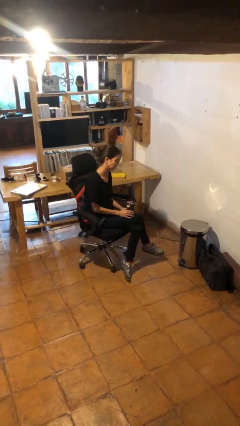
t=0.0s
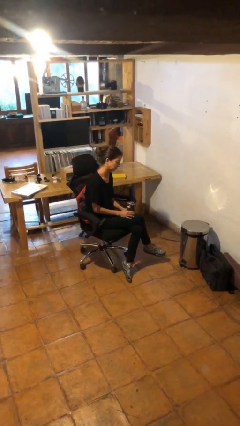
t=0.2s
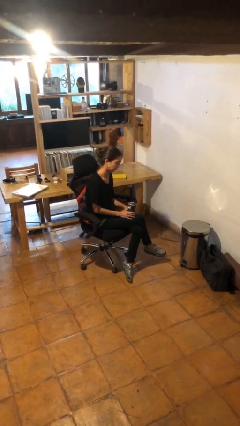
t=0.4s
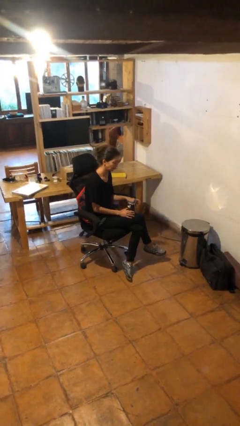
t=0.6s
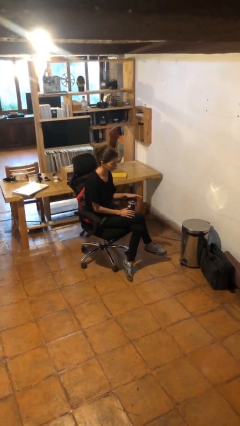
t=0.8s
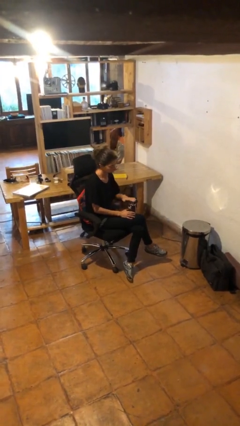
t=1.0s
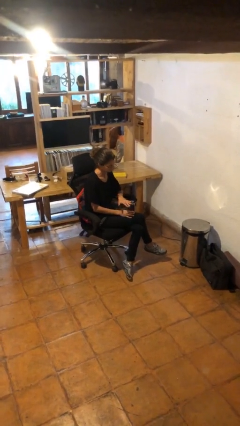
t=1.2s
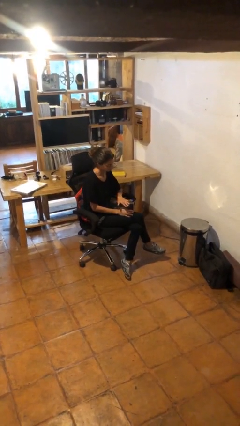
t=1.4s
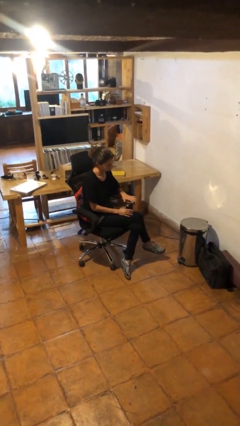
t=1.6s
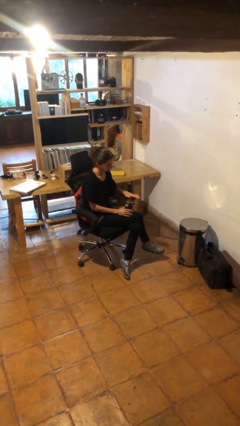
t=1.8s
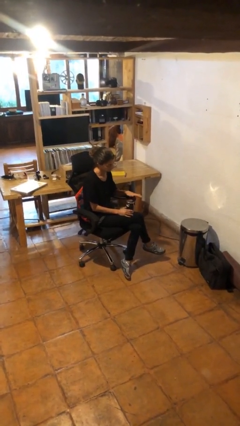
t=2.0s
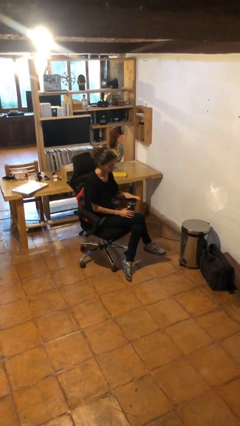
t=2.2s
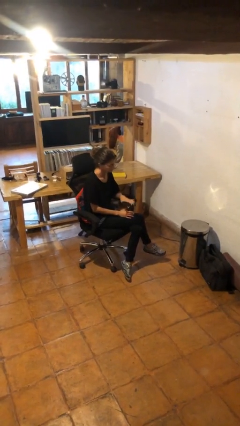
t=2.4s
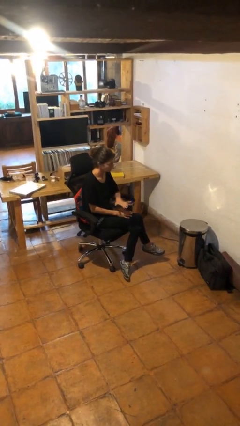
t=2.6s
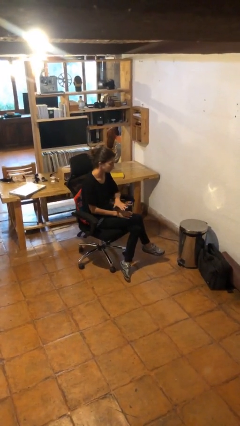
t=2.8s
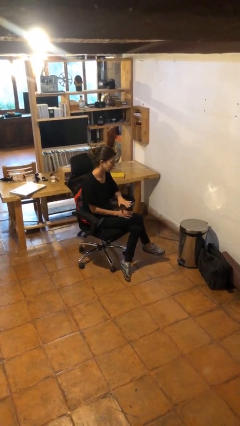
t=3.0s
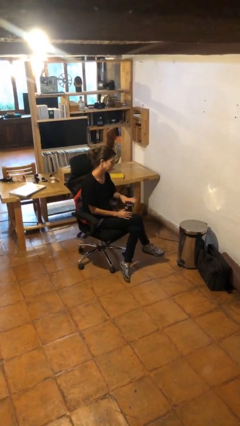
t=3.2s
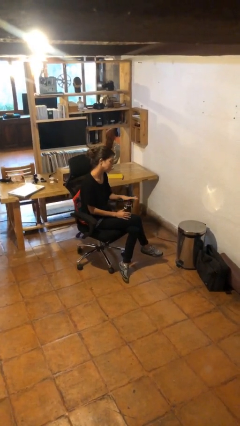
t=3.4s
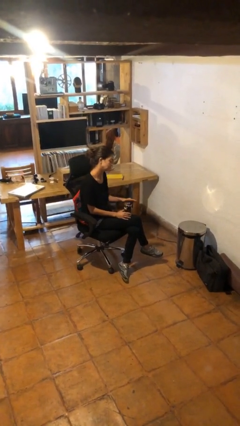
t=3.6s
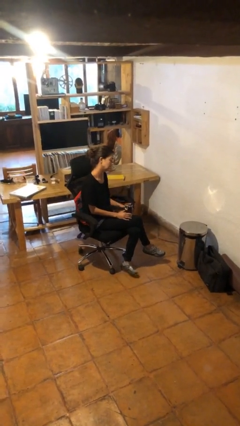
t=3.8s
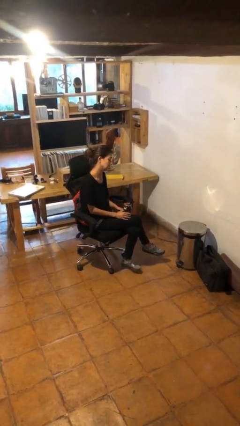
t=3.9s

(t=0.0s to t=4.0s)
person waves hand over object

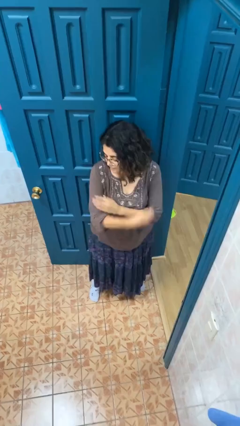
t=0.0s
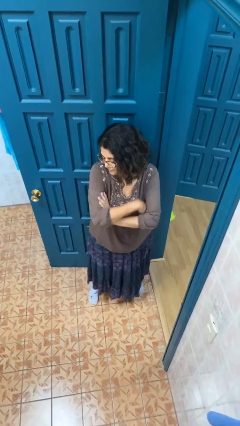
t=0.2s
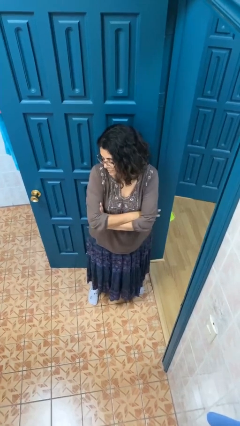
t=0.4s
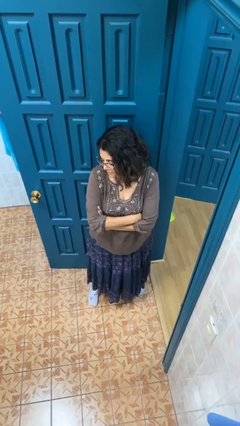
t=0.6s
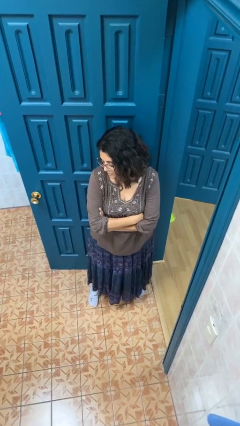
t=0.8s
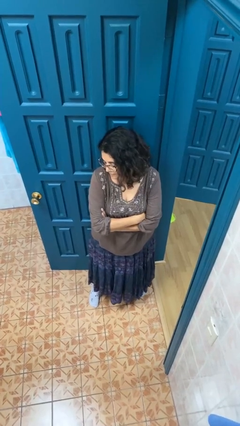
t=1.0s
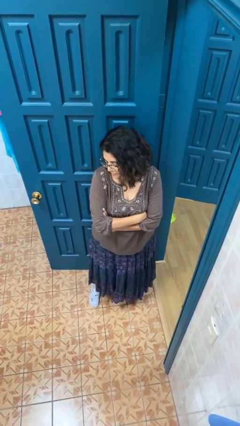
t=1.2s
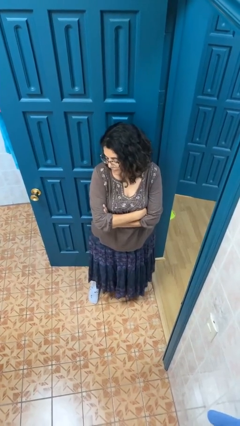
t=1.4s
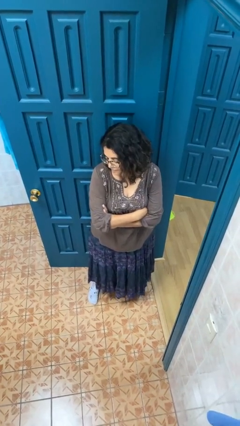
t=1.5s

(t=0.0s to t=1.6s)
person crosses arms

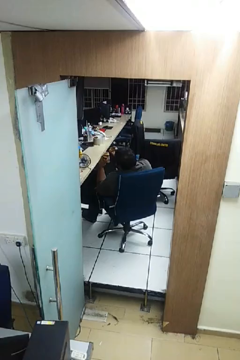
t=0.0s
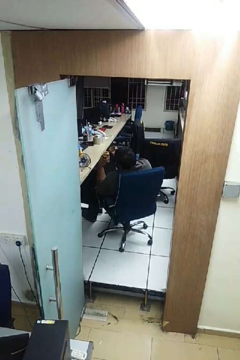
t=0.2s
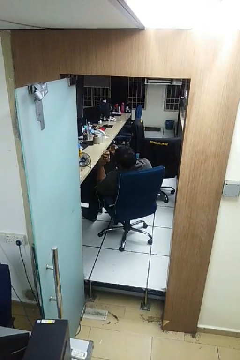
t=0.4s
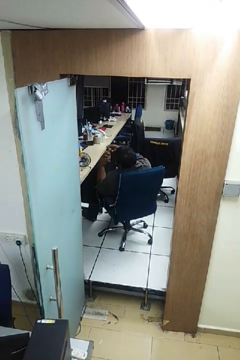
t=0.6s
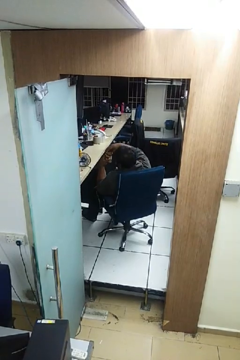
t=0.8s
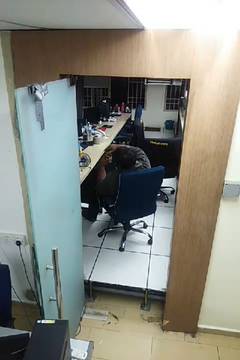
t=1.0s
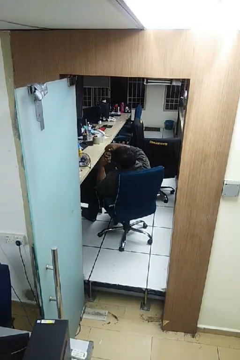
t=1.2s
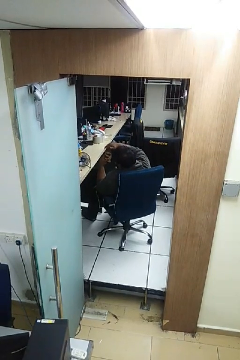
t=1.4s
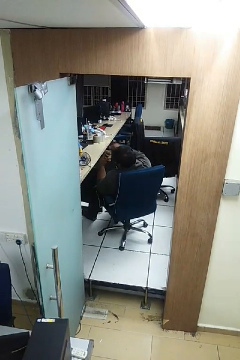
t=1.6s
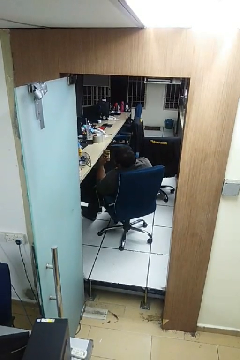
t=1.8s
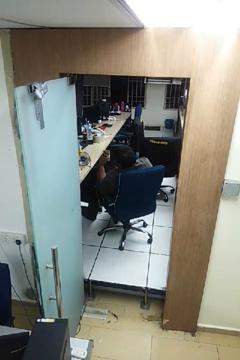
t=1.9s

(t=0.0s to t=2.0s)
person closes jar

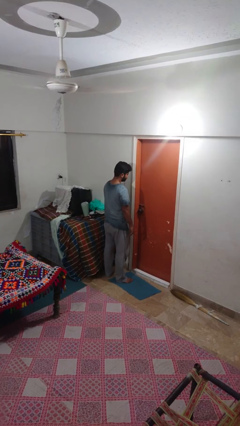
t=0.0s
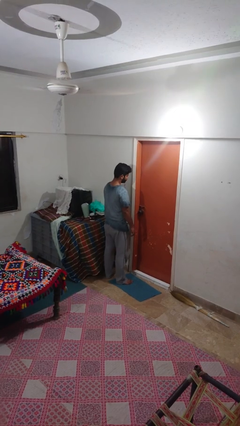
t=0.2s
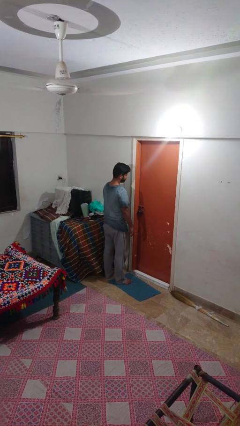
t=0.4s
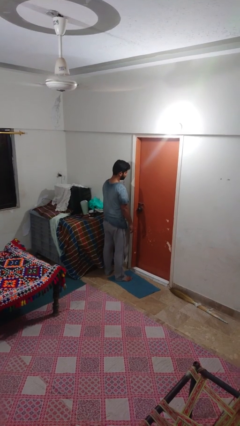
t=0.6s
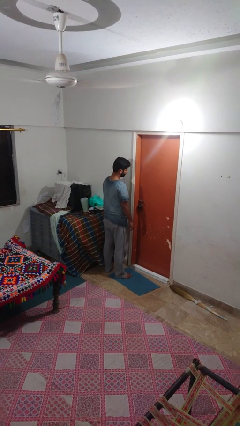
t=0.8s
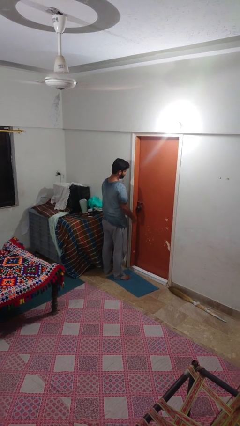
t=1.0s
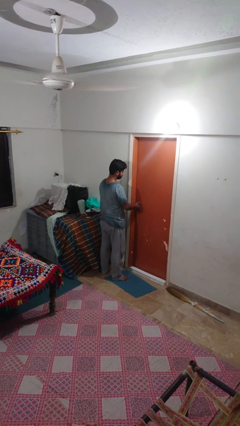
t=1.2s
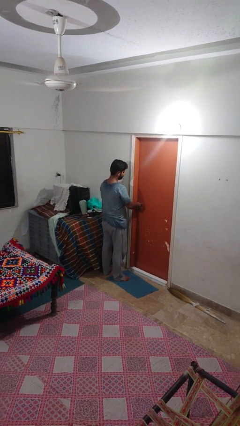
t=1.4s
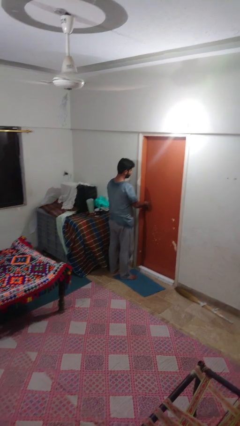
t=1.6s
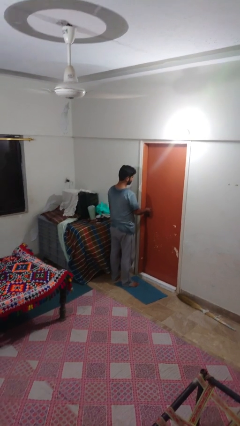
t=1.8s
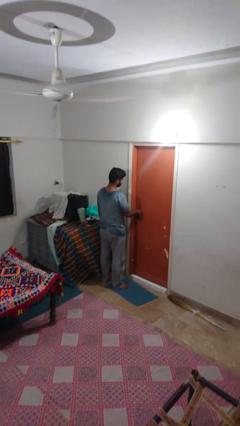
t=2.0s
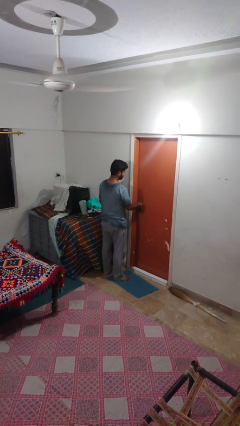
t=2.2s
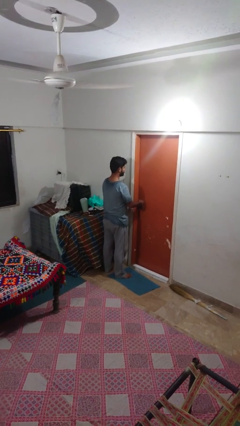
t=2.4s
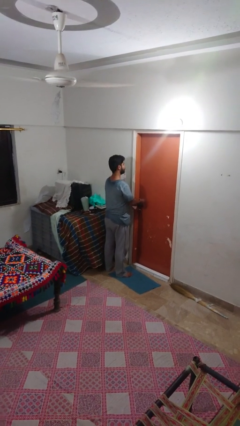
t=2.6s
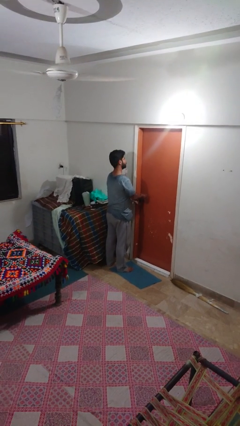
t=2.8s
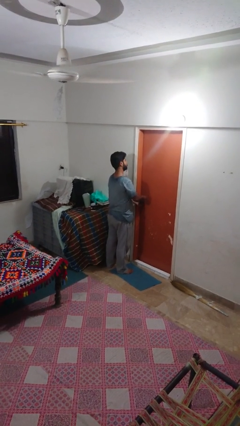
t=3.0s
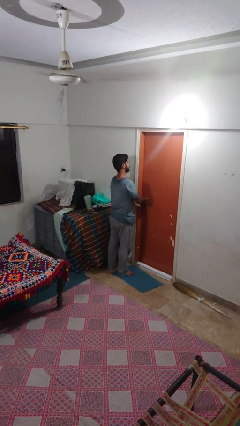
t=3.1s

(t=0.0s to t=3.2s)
person unlocks door with keys

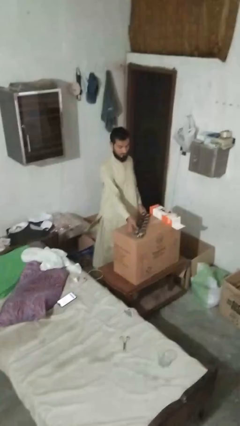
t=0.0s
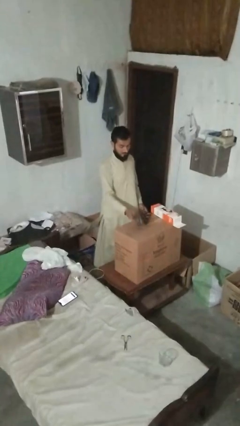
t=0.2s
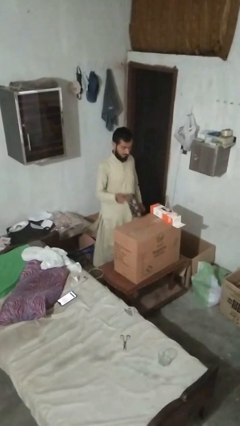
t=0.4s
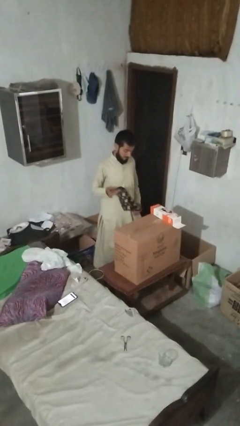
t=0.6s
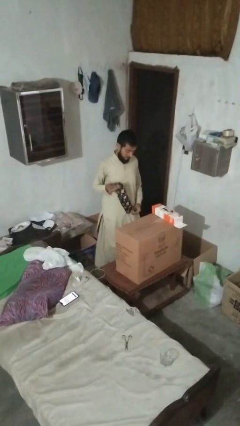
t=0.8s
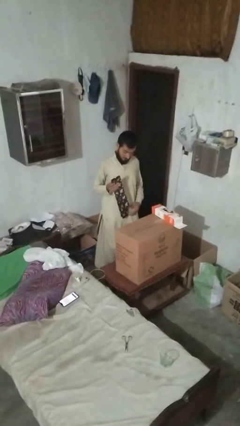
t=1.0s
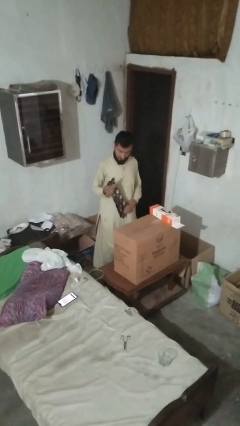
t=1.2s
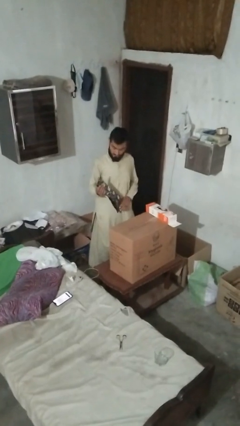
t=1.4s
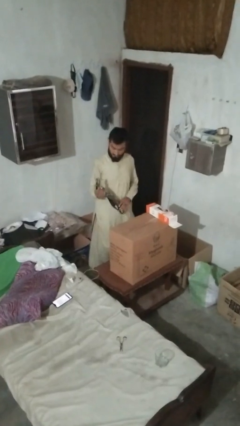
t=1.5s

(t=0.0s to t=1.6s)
person picks up object from countertop

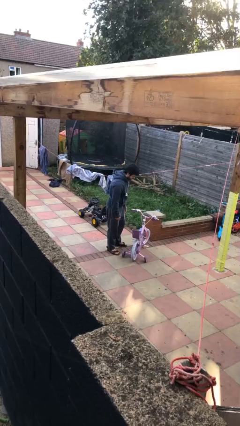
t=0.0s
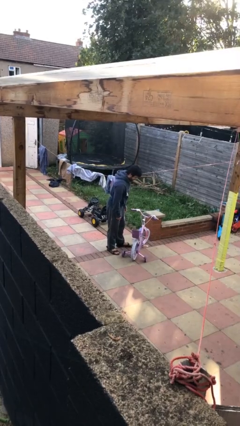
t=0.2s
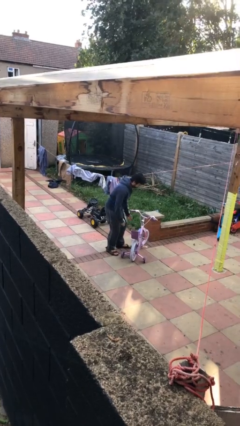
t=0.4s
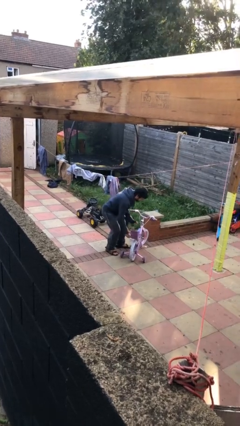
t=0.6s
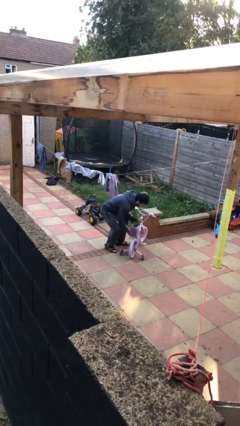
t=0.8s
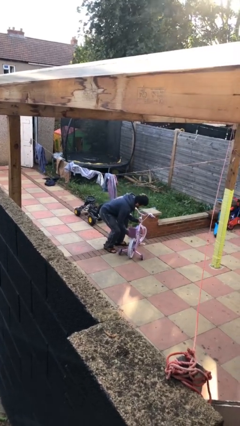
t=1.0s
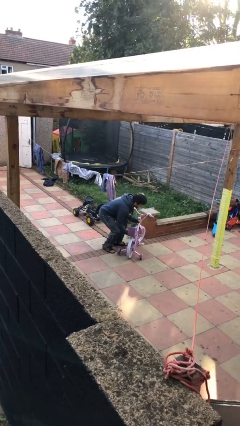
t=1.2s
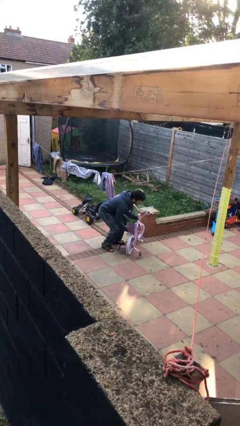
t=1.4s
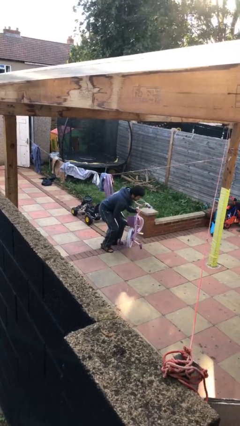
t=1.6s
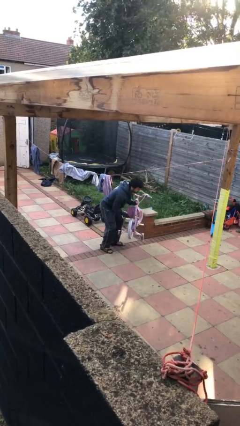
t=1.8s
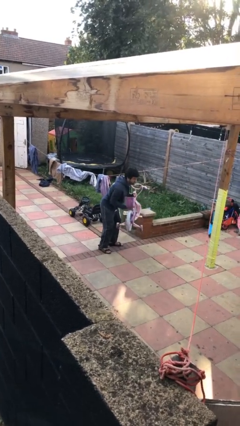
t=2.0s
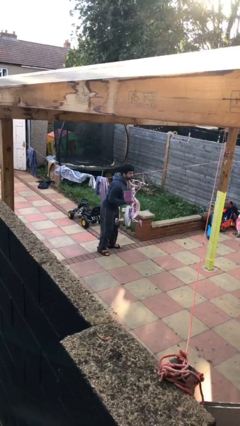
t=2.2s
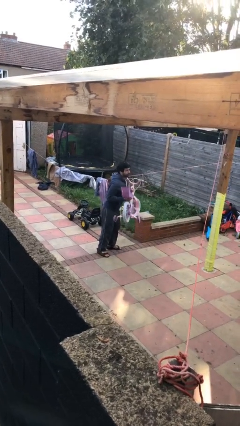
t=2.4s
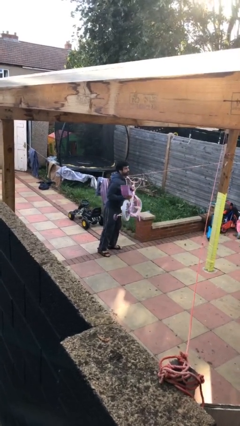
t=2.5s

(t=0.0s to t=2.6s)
person picks up object from floor

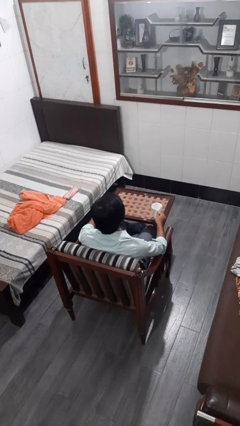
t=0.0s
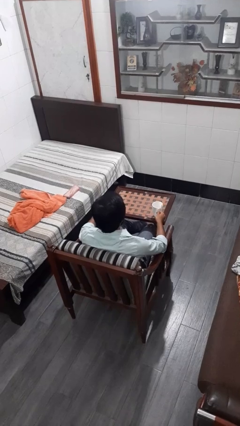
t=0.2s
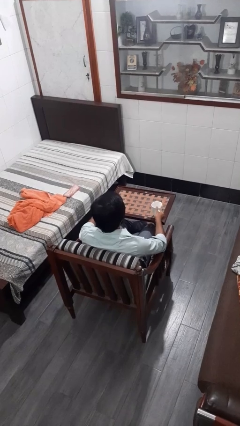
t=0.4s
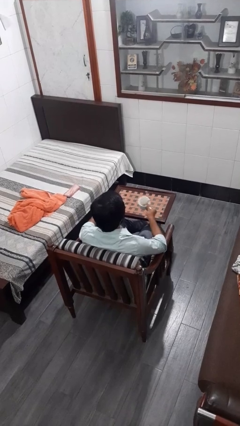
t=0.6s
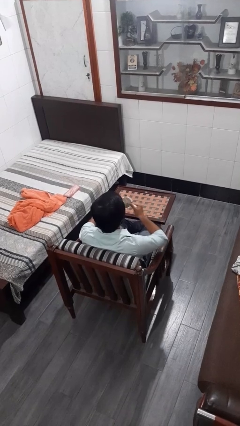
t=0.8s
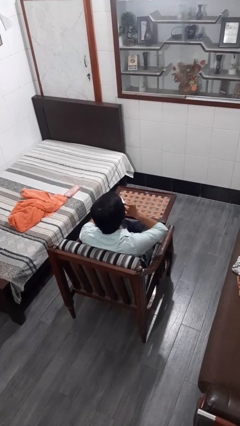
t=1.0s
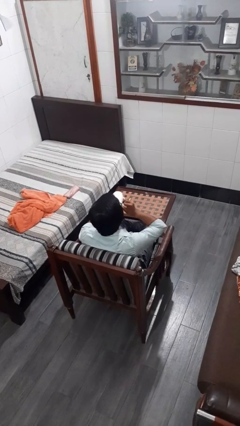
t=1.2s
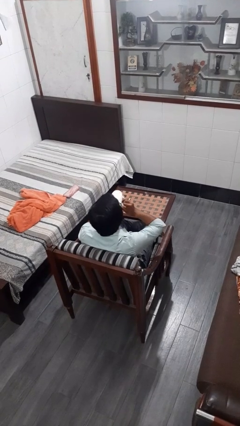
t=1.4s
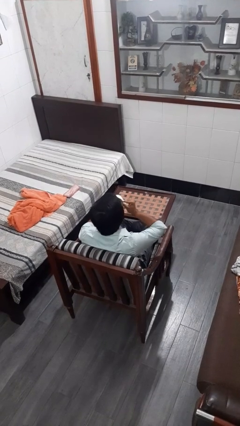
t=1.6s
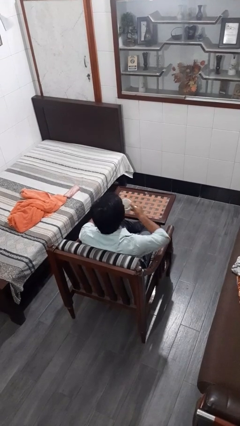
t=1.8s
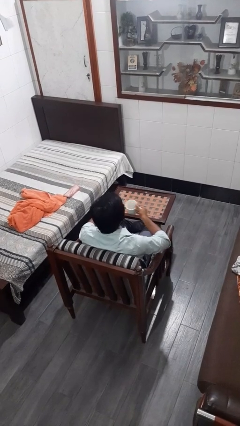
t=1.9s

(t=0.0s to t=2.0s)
person drinks from mug

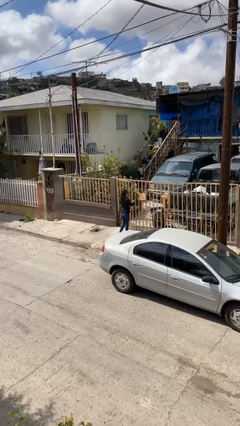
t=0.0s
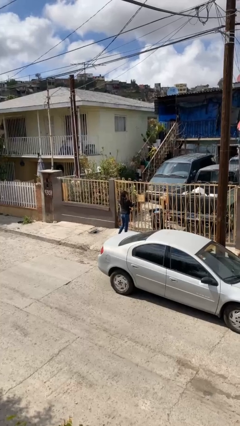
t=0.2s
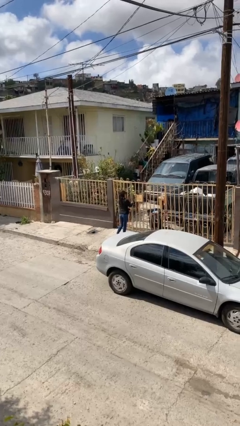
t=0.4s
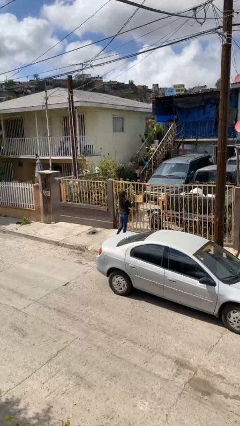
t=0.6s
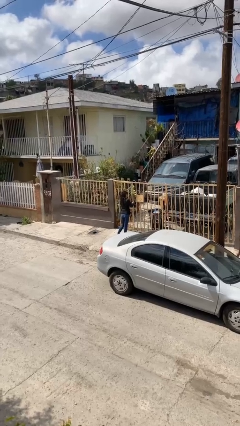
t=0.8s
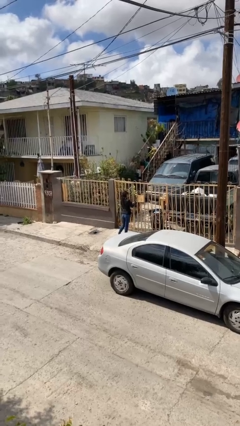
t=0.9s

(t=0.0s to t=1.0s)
person closes facility door
